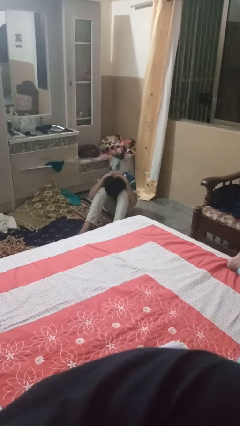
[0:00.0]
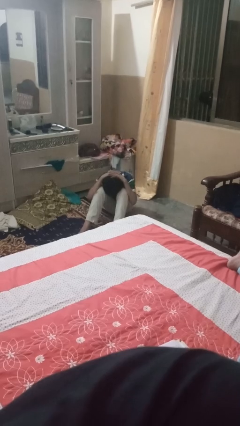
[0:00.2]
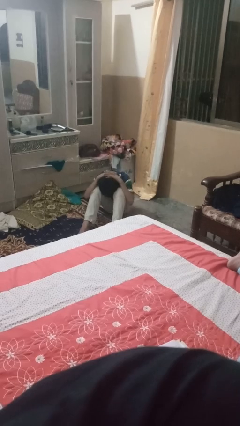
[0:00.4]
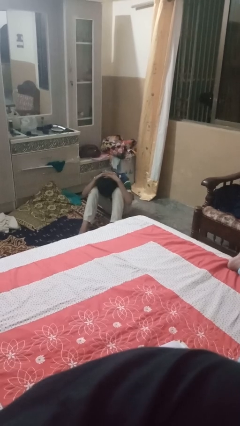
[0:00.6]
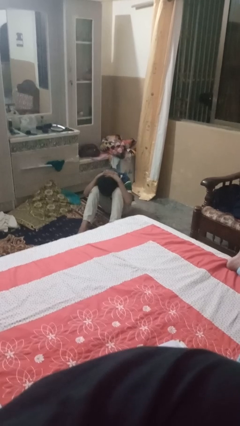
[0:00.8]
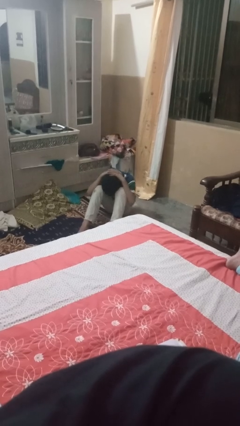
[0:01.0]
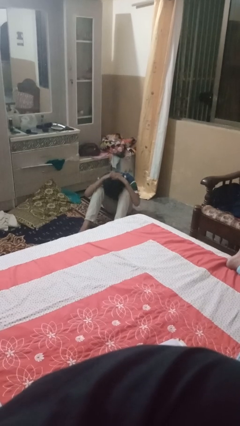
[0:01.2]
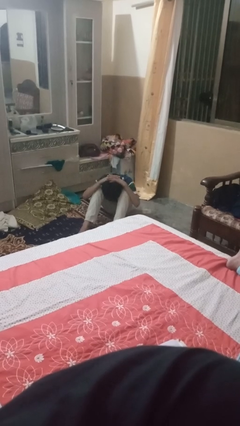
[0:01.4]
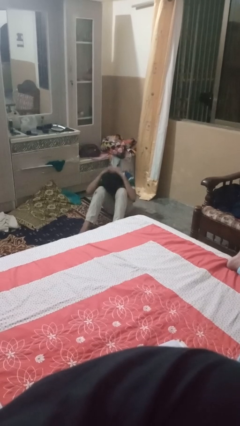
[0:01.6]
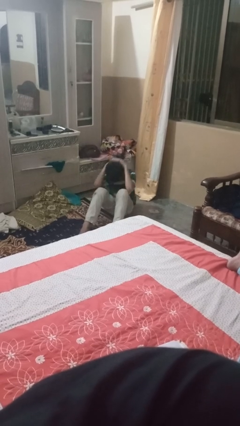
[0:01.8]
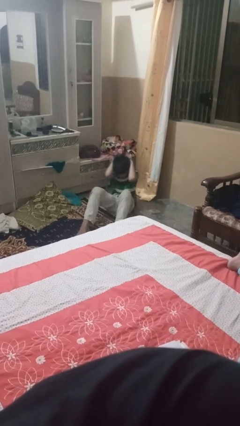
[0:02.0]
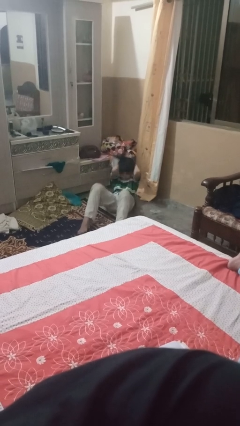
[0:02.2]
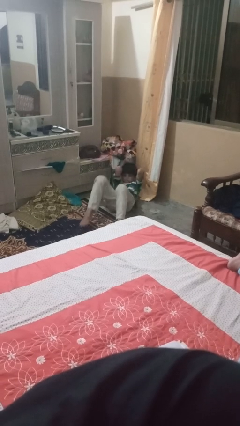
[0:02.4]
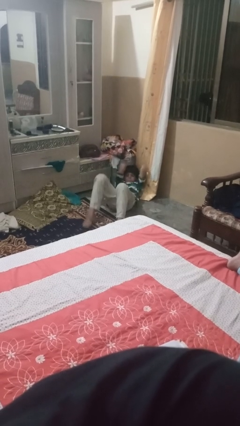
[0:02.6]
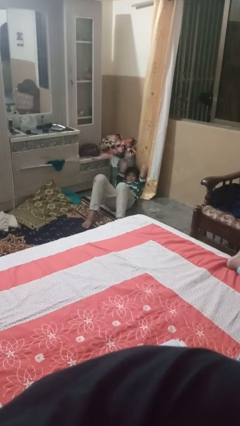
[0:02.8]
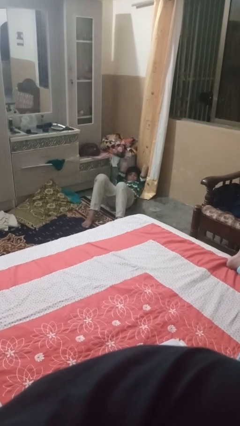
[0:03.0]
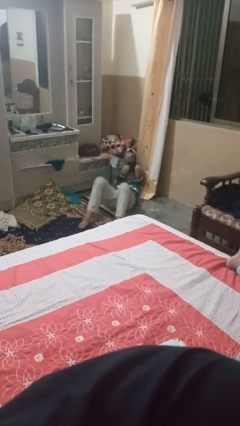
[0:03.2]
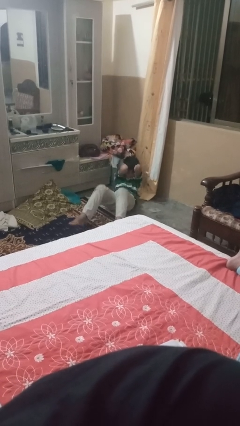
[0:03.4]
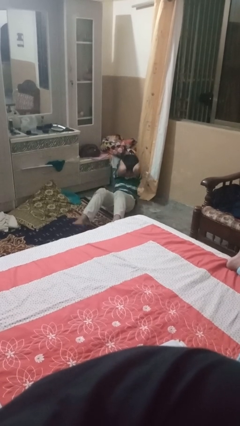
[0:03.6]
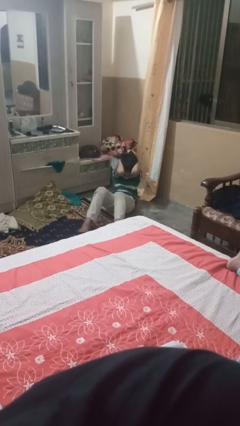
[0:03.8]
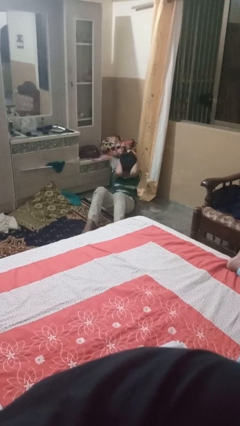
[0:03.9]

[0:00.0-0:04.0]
person exercises with situp

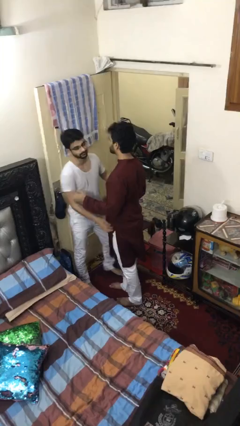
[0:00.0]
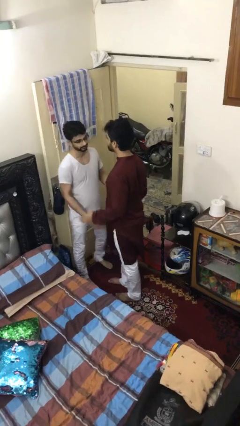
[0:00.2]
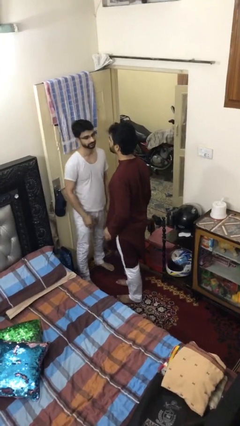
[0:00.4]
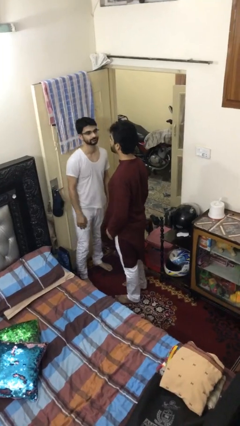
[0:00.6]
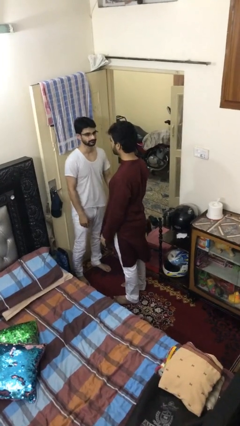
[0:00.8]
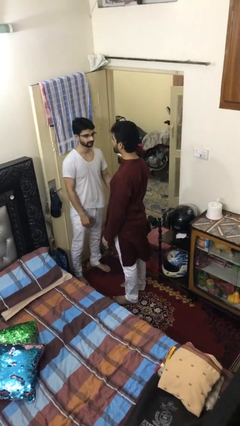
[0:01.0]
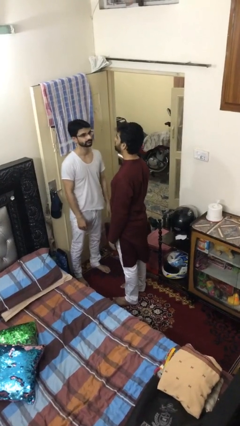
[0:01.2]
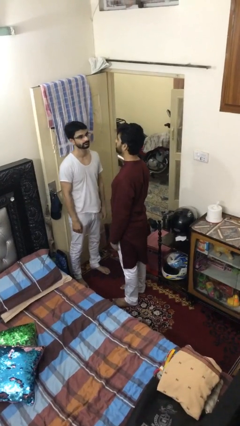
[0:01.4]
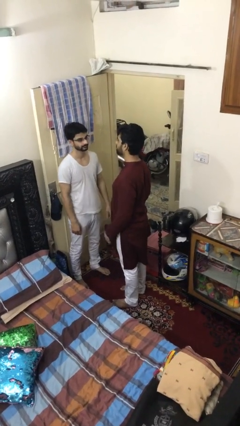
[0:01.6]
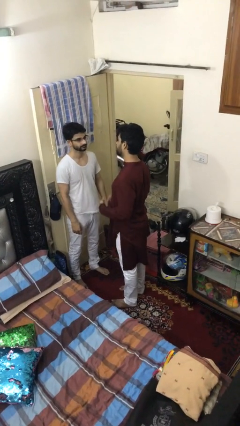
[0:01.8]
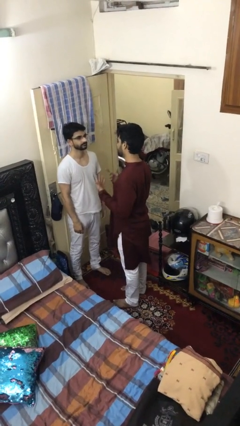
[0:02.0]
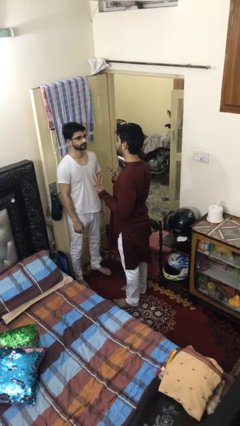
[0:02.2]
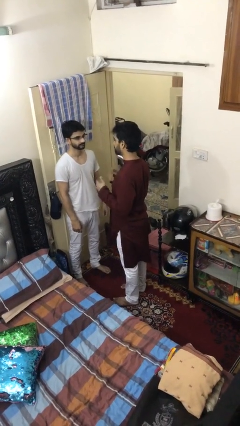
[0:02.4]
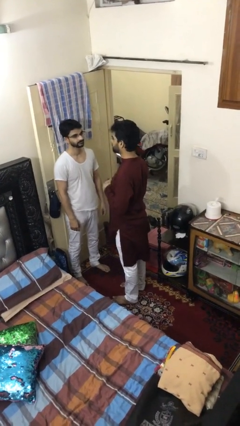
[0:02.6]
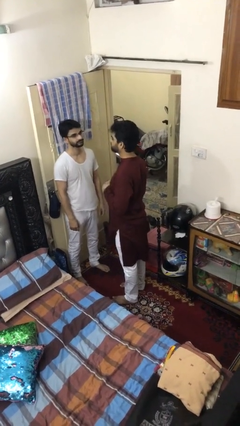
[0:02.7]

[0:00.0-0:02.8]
person talks to person

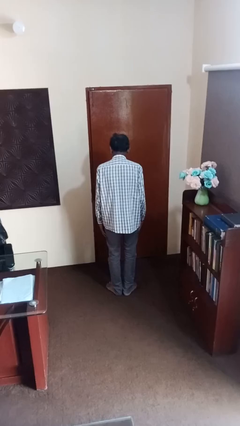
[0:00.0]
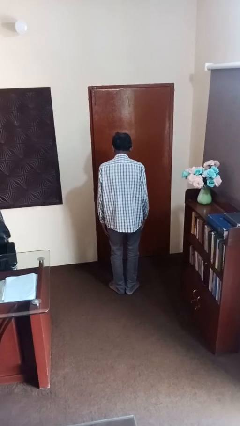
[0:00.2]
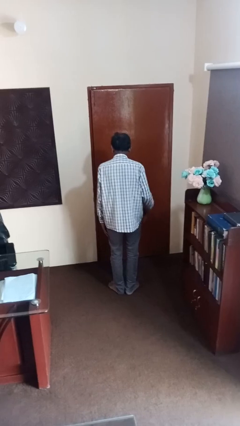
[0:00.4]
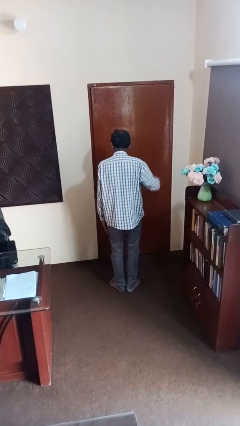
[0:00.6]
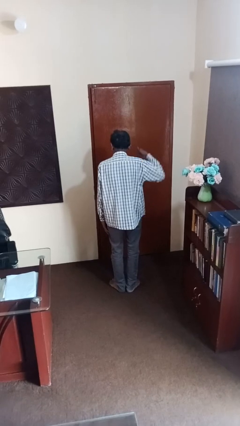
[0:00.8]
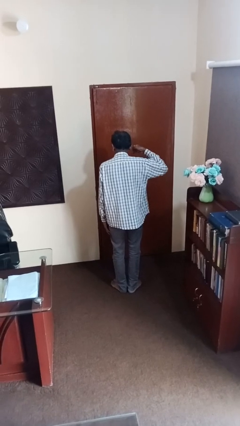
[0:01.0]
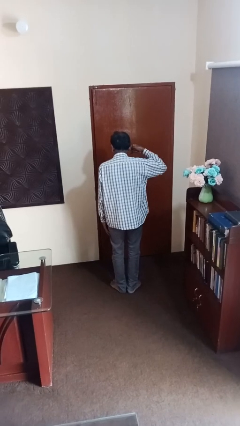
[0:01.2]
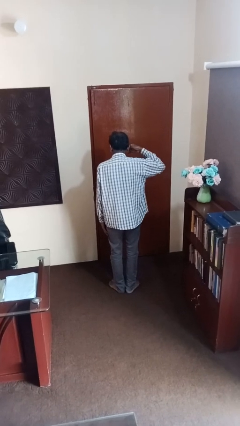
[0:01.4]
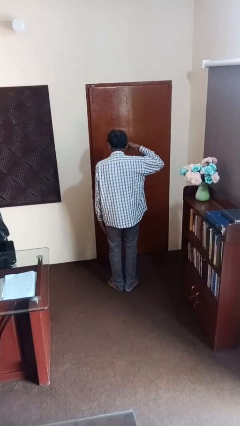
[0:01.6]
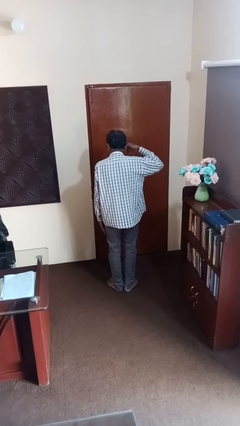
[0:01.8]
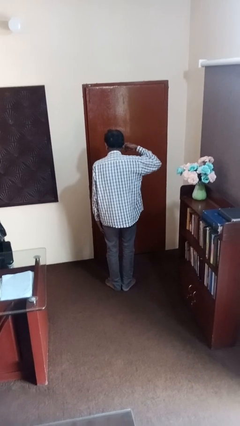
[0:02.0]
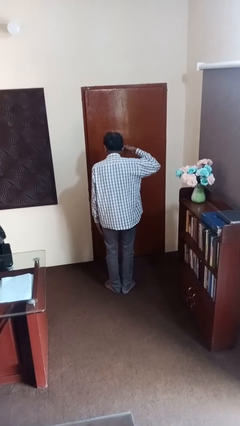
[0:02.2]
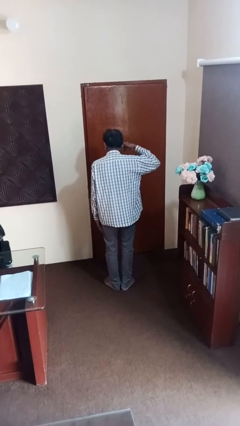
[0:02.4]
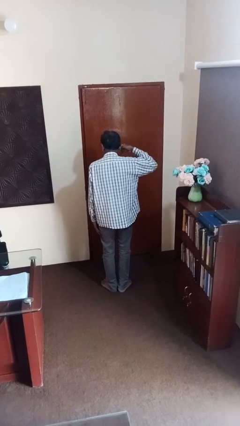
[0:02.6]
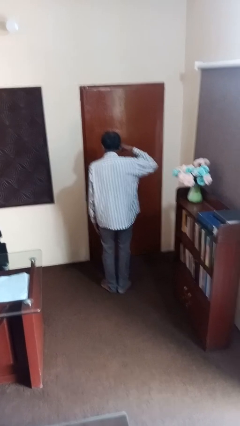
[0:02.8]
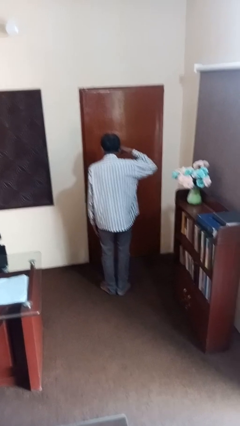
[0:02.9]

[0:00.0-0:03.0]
person gestures call me

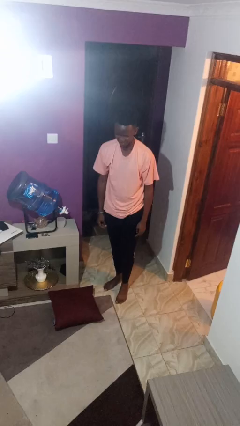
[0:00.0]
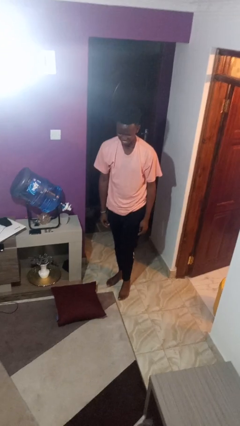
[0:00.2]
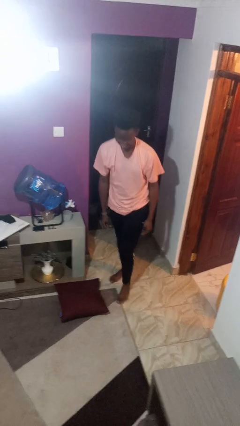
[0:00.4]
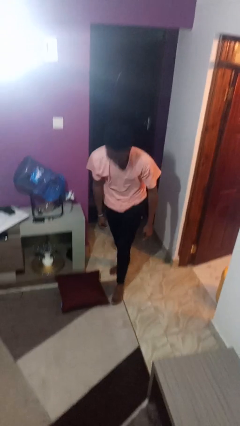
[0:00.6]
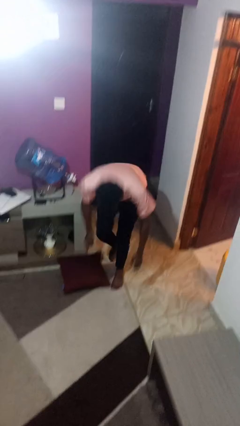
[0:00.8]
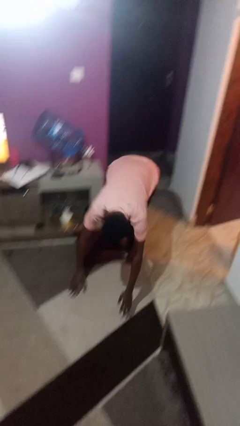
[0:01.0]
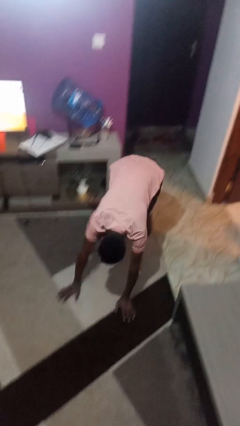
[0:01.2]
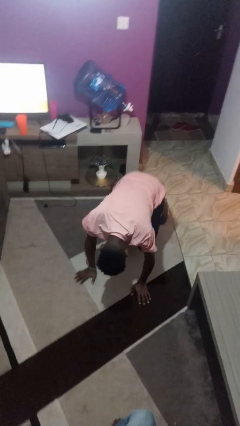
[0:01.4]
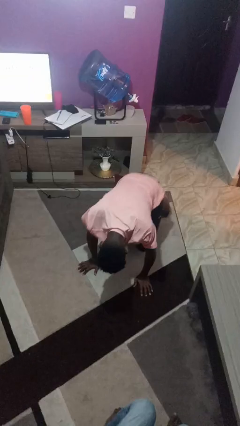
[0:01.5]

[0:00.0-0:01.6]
person trips on object on floor

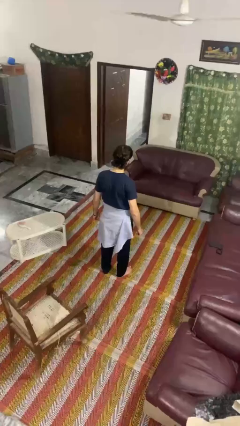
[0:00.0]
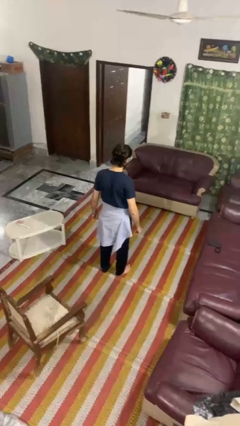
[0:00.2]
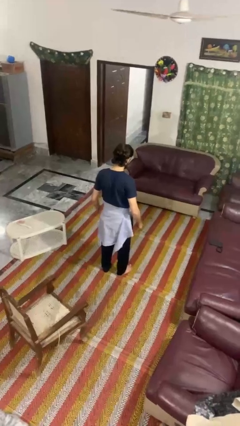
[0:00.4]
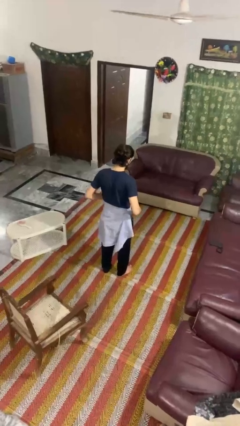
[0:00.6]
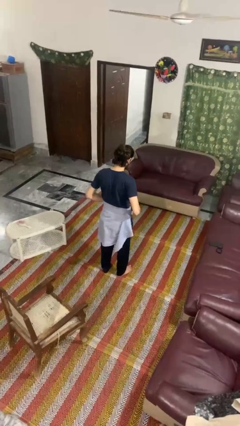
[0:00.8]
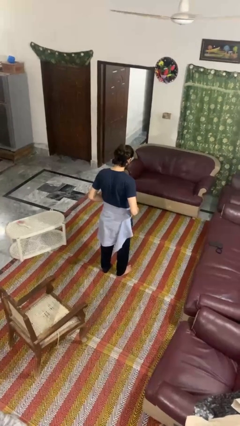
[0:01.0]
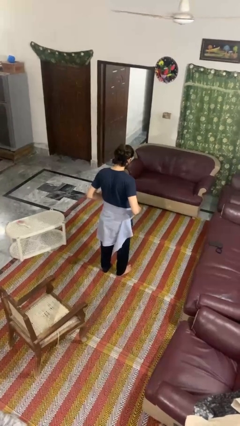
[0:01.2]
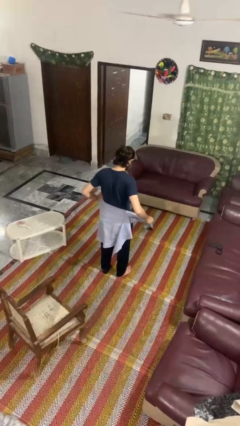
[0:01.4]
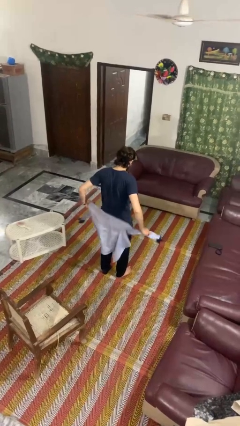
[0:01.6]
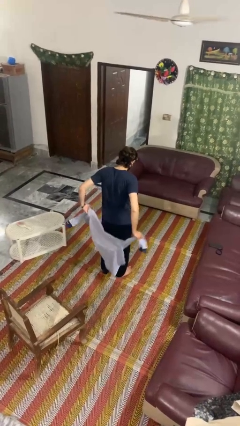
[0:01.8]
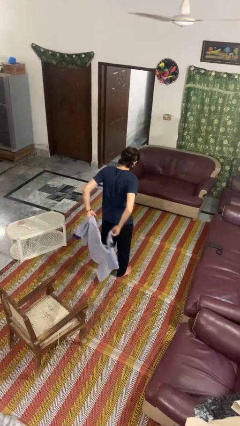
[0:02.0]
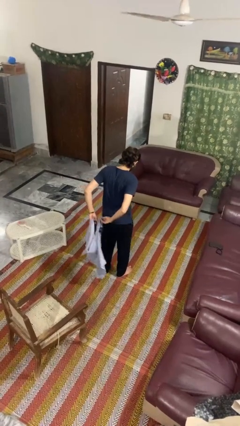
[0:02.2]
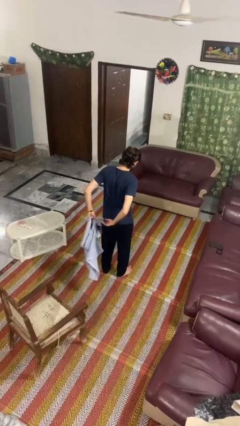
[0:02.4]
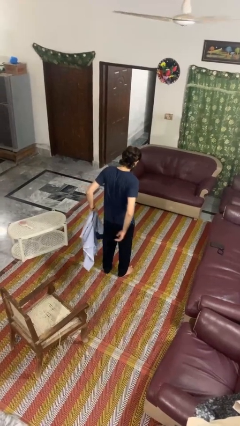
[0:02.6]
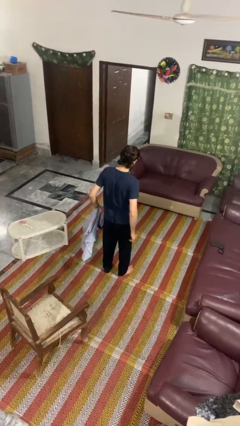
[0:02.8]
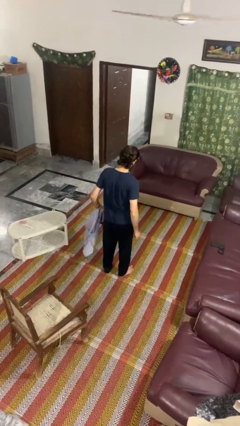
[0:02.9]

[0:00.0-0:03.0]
person unties jacket around waist

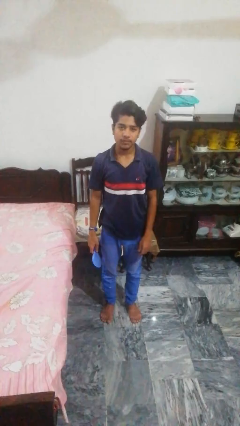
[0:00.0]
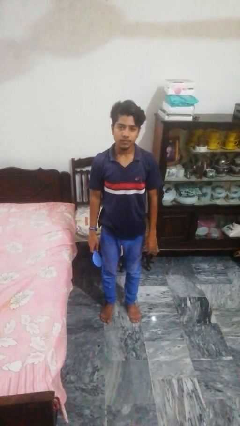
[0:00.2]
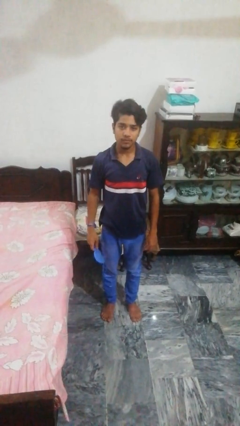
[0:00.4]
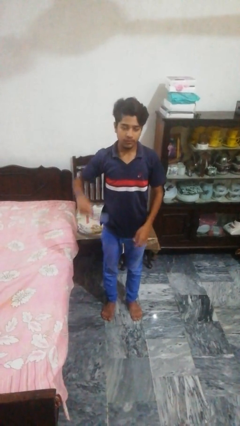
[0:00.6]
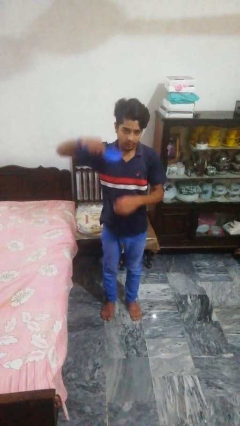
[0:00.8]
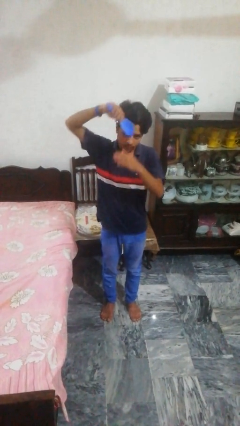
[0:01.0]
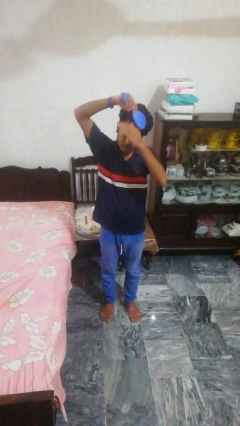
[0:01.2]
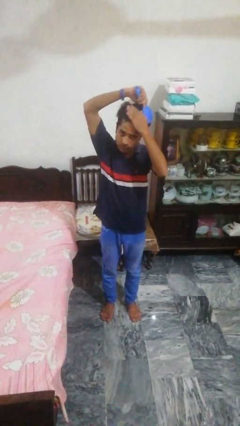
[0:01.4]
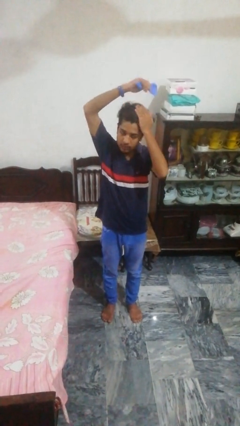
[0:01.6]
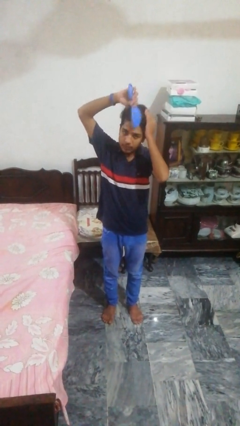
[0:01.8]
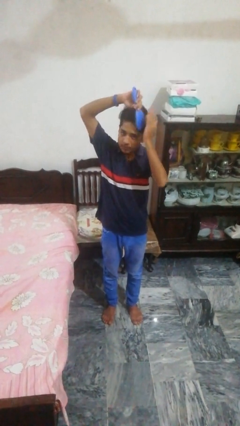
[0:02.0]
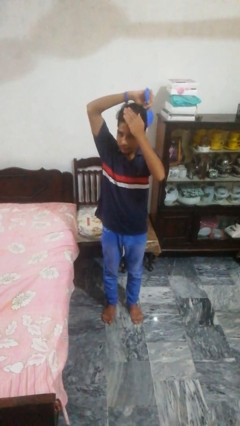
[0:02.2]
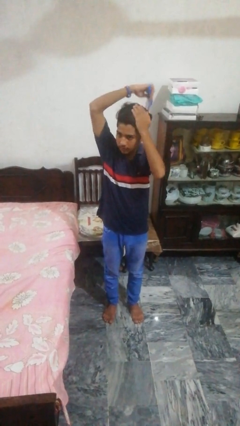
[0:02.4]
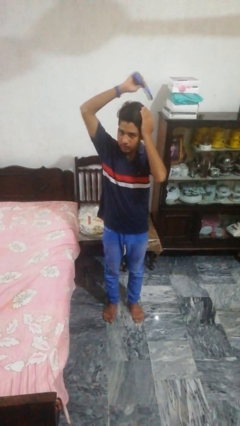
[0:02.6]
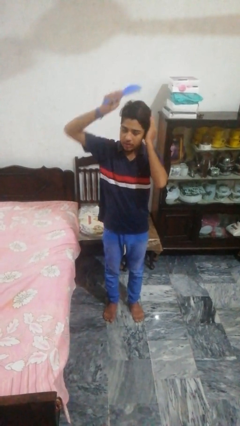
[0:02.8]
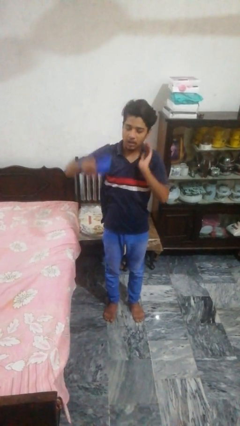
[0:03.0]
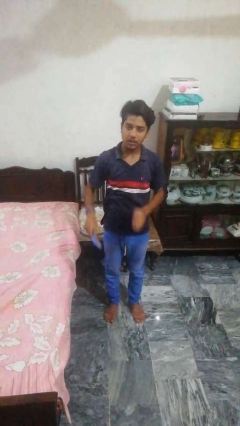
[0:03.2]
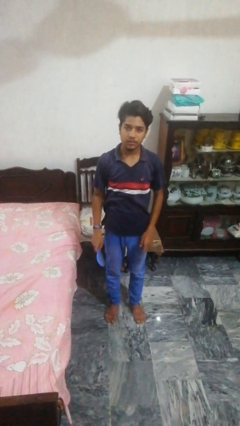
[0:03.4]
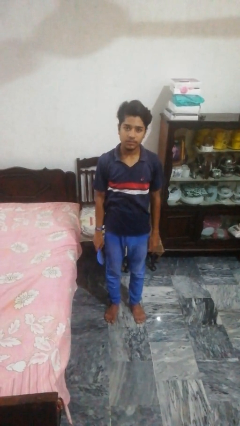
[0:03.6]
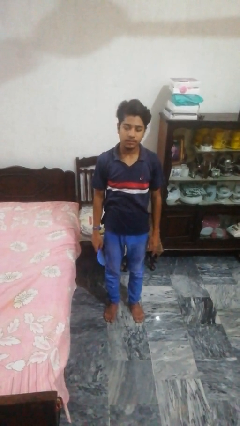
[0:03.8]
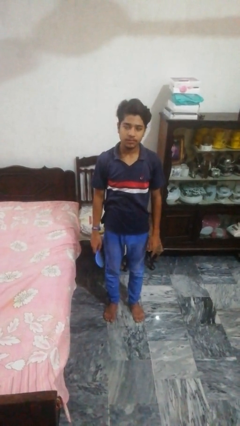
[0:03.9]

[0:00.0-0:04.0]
person brushes hair
